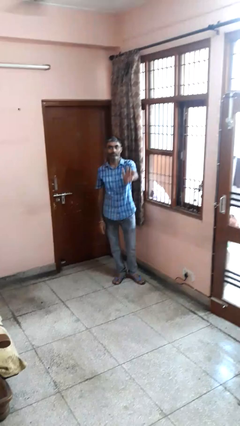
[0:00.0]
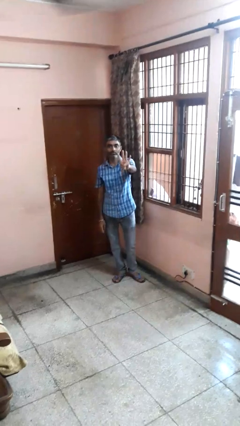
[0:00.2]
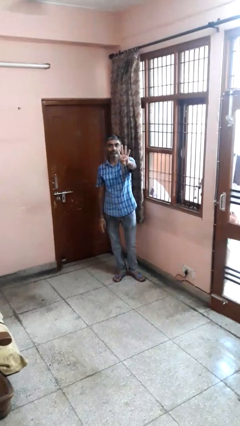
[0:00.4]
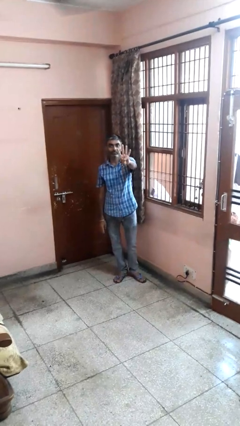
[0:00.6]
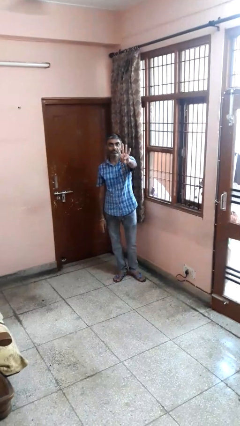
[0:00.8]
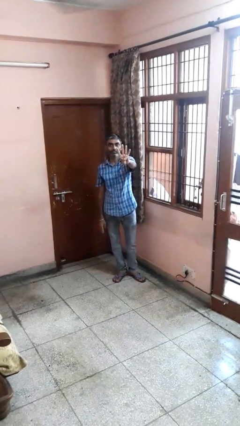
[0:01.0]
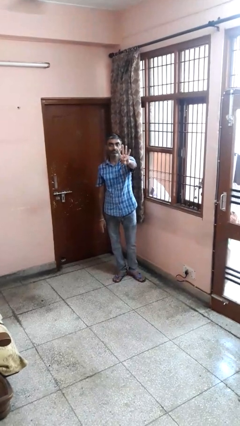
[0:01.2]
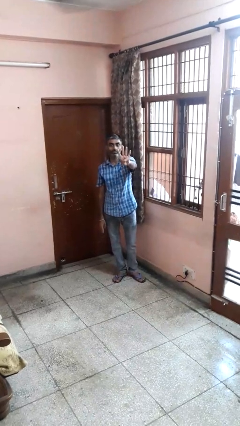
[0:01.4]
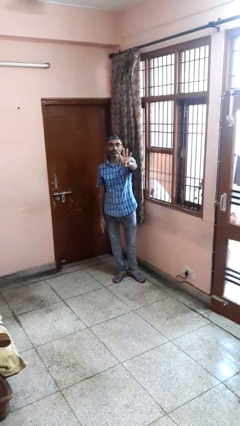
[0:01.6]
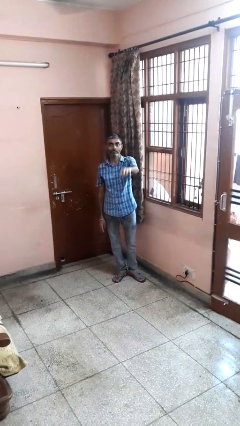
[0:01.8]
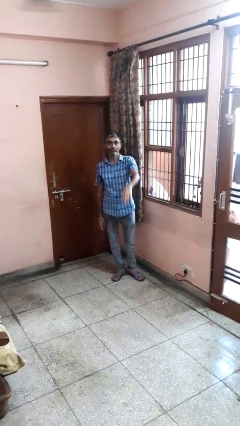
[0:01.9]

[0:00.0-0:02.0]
person gestures number four

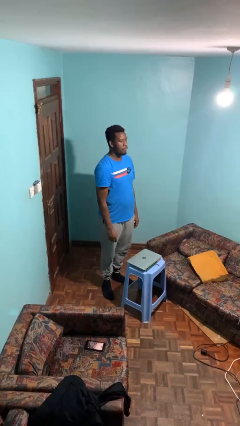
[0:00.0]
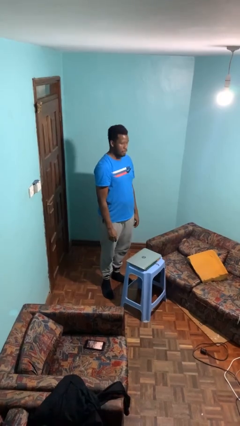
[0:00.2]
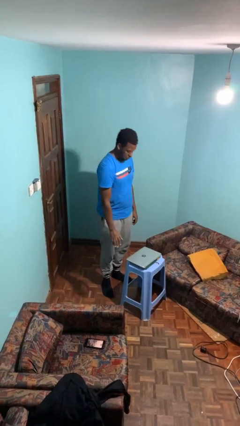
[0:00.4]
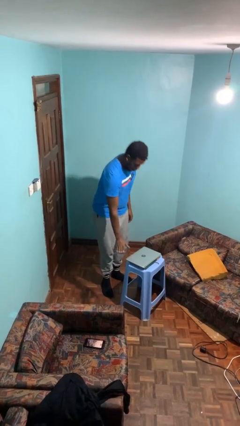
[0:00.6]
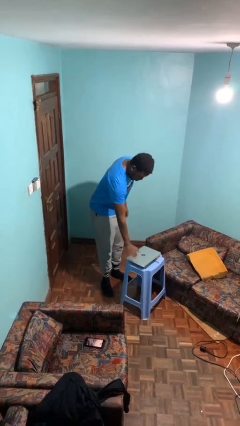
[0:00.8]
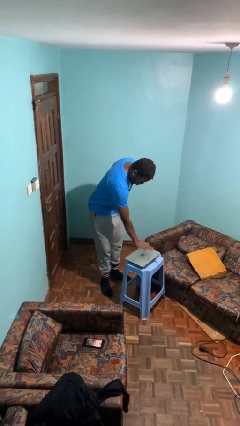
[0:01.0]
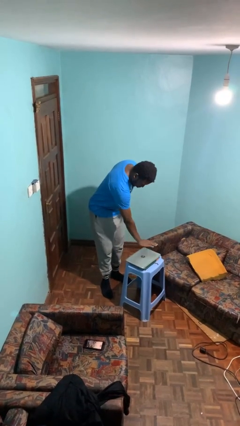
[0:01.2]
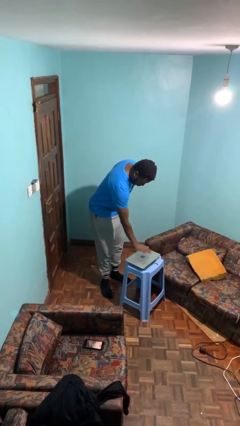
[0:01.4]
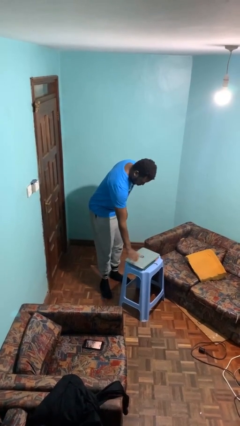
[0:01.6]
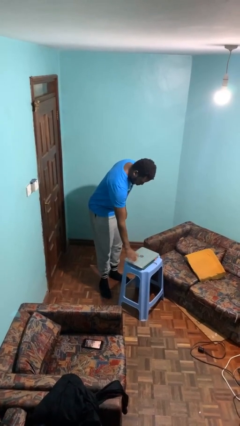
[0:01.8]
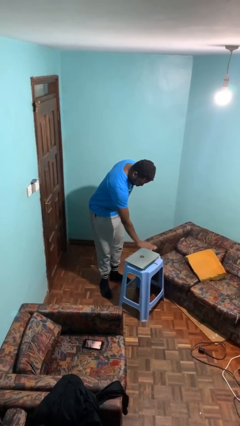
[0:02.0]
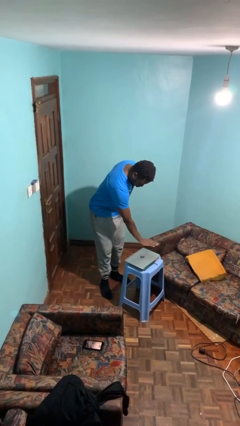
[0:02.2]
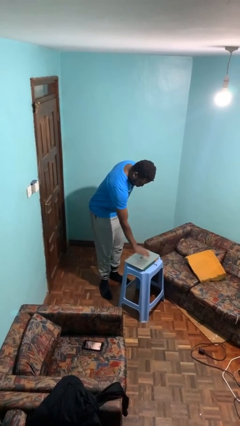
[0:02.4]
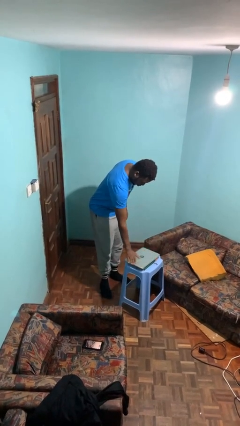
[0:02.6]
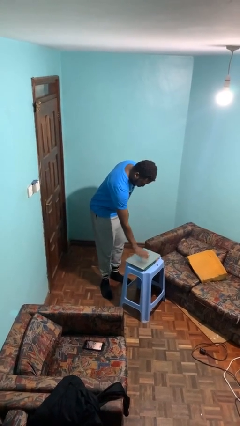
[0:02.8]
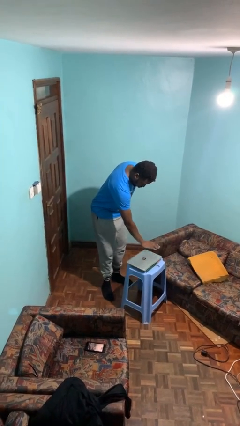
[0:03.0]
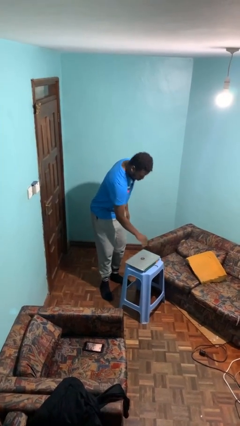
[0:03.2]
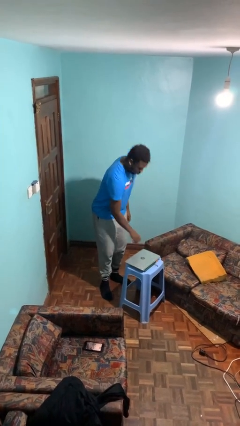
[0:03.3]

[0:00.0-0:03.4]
person waves hand over object

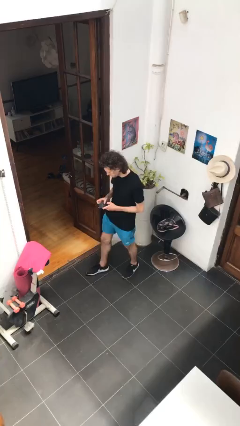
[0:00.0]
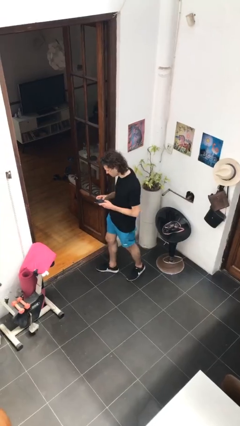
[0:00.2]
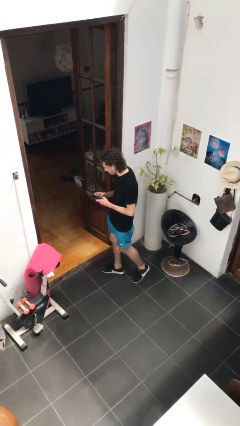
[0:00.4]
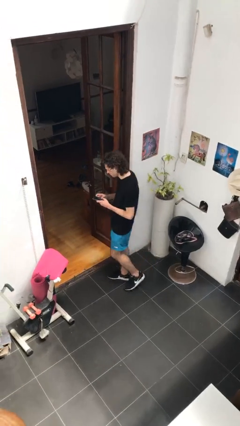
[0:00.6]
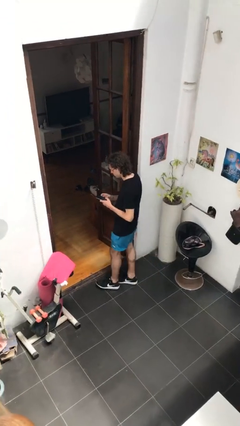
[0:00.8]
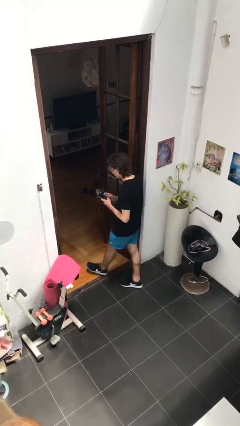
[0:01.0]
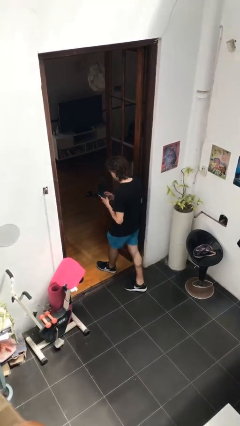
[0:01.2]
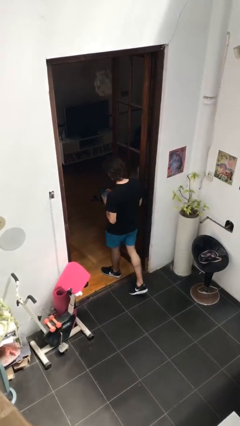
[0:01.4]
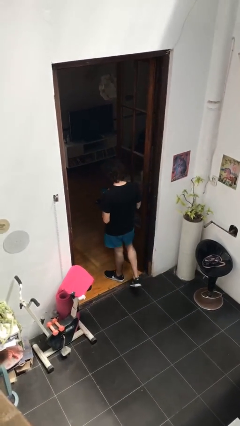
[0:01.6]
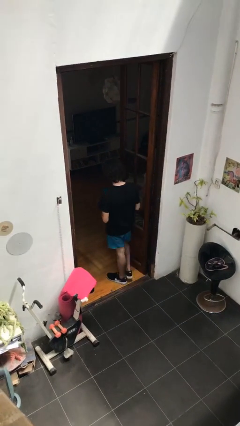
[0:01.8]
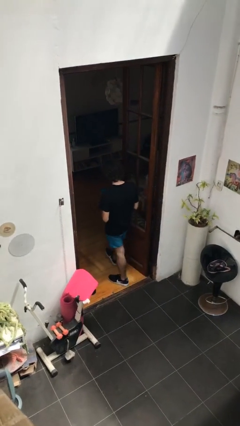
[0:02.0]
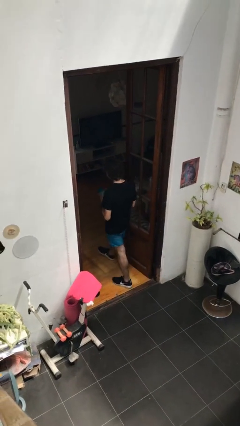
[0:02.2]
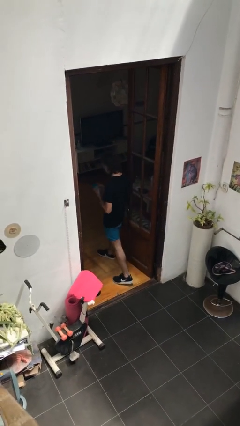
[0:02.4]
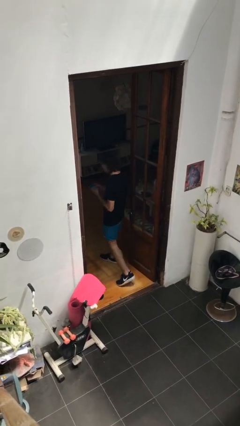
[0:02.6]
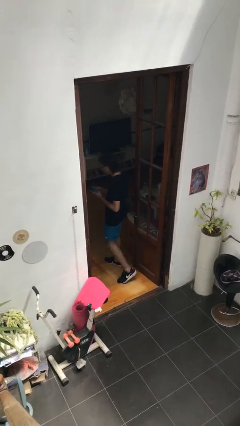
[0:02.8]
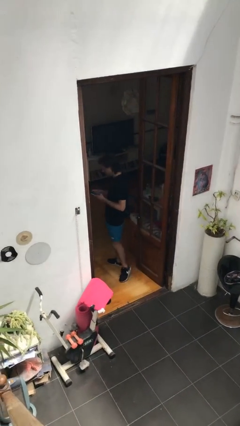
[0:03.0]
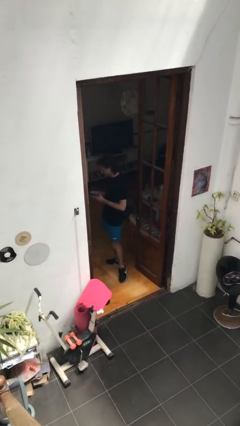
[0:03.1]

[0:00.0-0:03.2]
person exits scene through structure

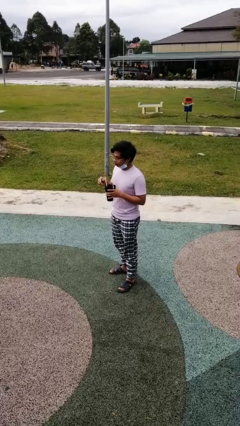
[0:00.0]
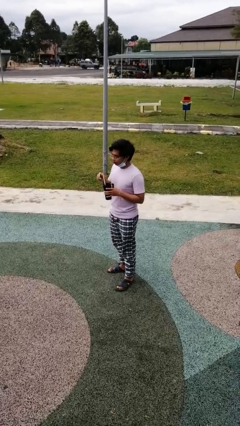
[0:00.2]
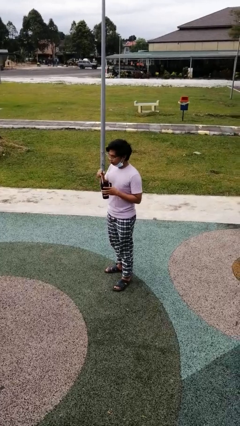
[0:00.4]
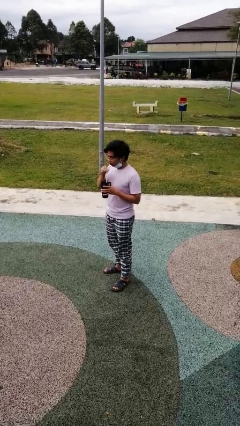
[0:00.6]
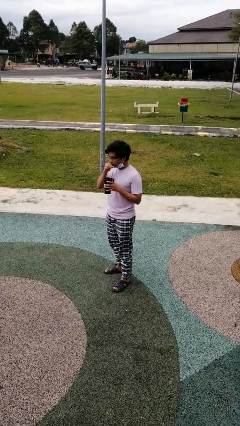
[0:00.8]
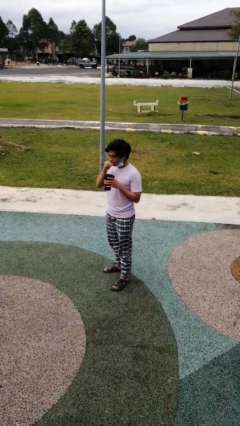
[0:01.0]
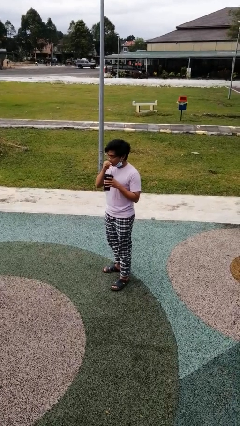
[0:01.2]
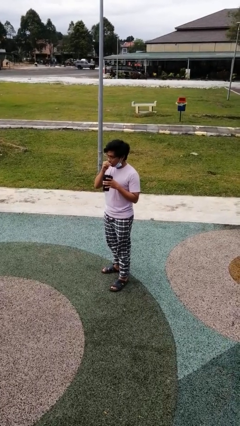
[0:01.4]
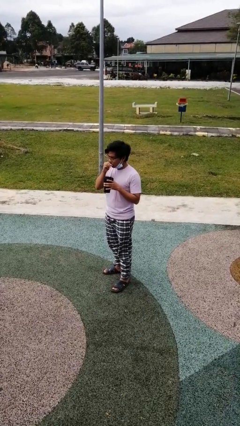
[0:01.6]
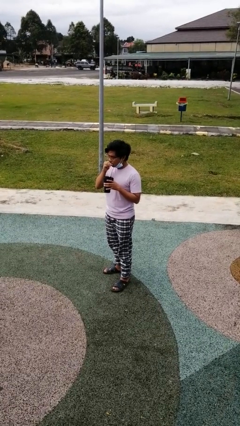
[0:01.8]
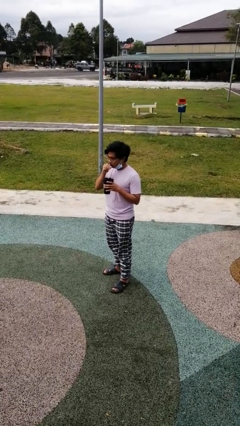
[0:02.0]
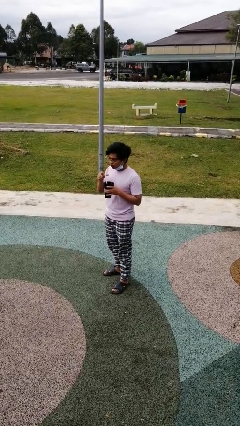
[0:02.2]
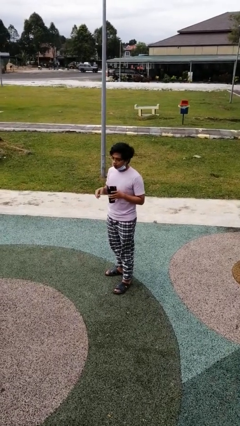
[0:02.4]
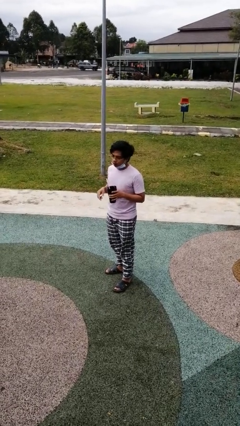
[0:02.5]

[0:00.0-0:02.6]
person drinks from straw

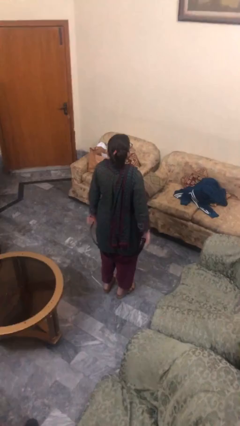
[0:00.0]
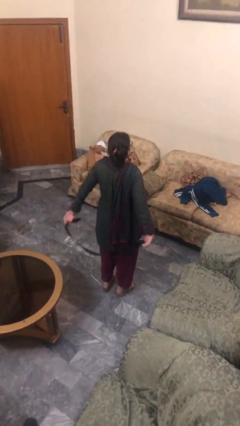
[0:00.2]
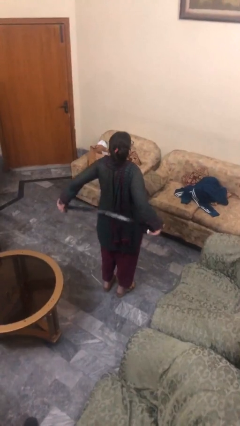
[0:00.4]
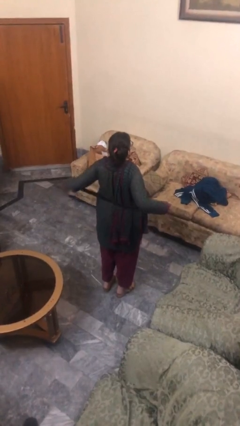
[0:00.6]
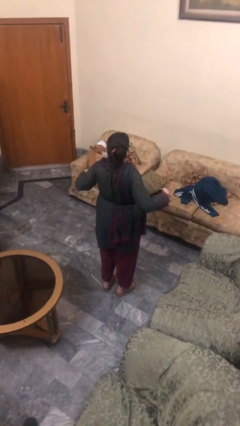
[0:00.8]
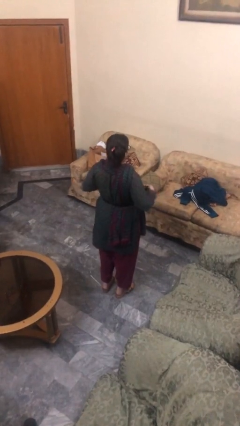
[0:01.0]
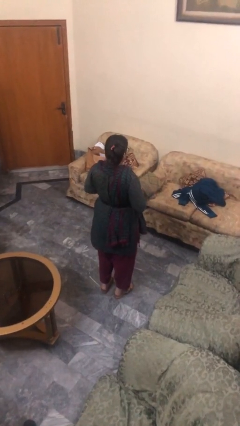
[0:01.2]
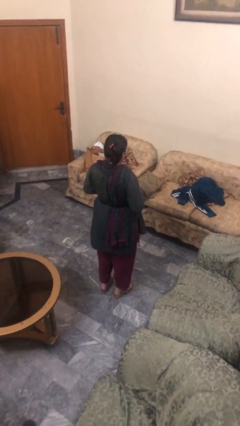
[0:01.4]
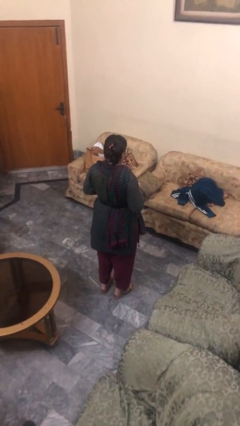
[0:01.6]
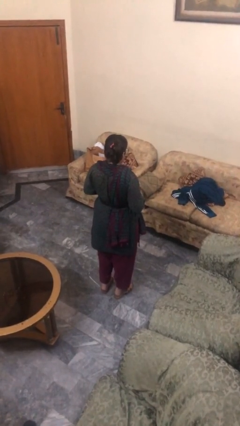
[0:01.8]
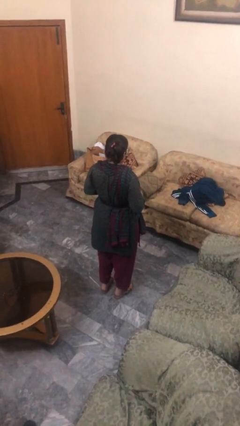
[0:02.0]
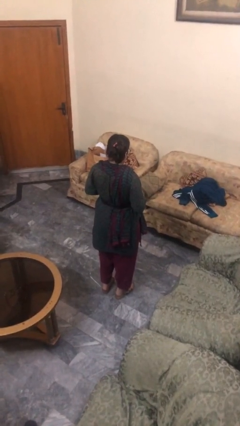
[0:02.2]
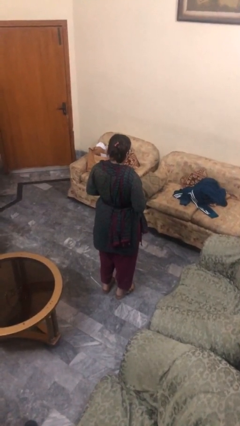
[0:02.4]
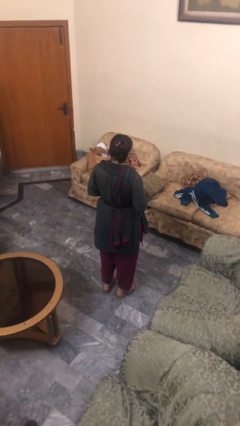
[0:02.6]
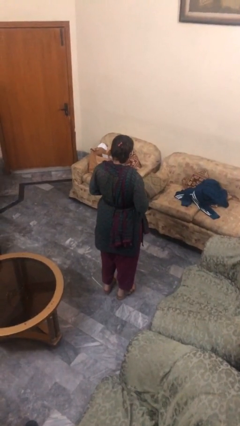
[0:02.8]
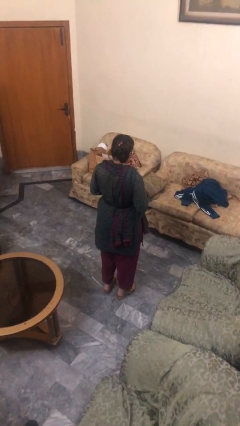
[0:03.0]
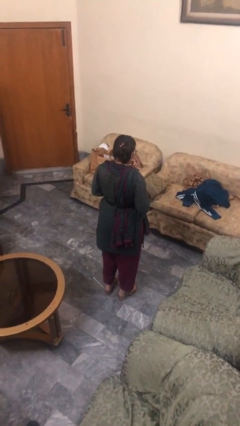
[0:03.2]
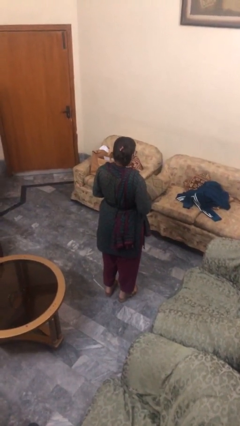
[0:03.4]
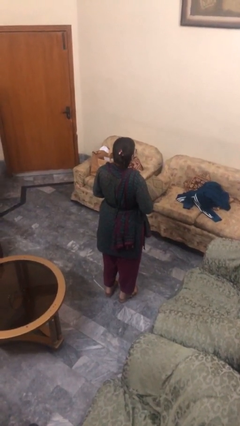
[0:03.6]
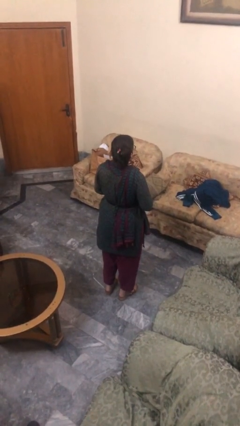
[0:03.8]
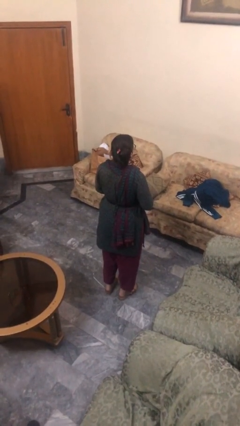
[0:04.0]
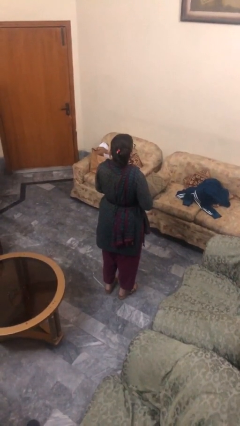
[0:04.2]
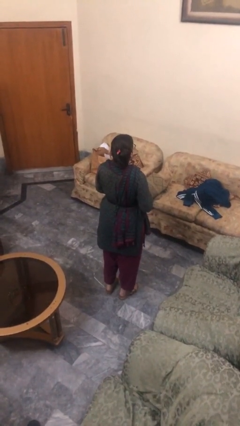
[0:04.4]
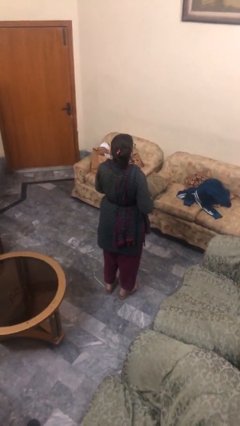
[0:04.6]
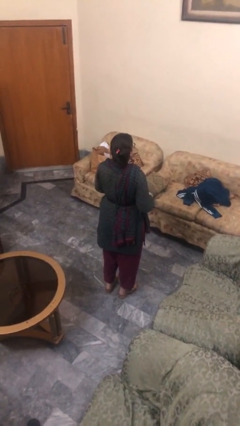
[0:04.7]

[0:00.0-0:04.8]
person puts on belt

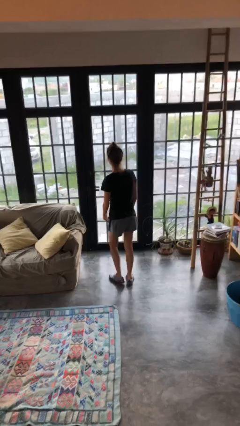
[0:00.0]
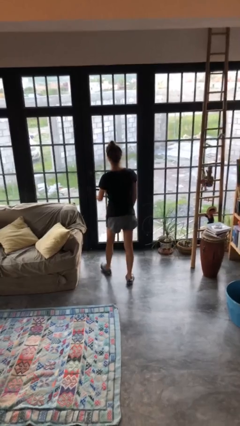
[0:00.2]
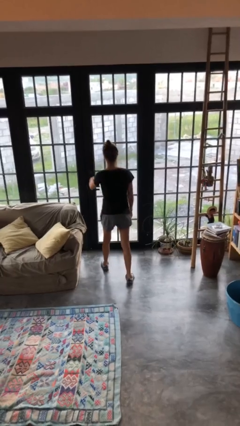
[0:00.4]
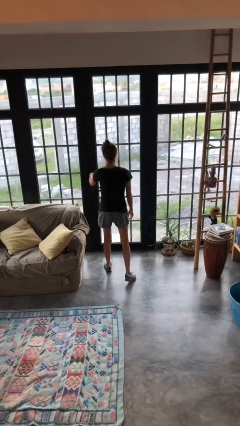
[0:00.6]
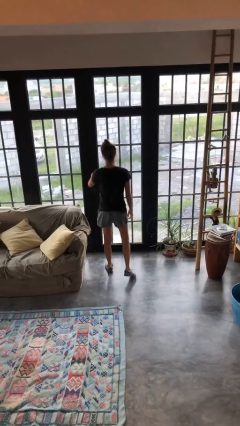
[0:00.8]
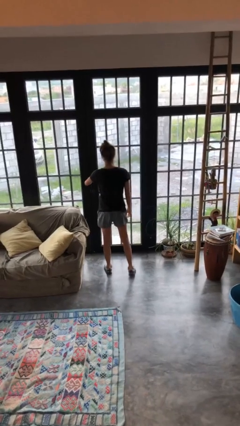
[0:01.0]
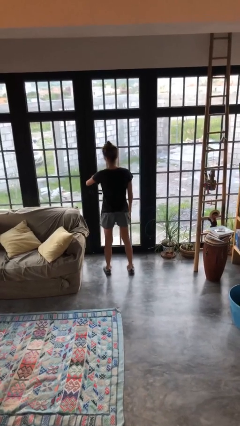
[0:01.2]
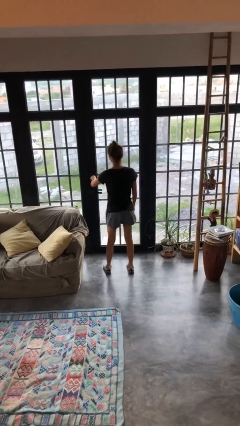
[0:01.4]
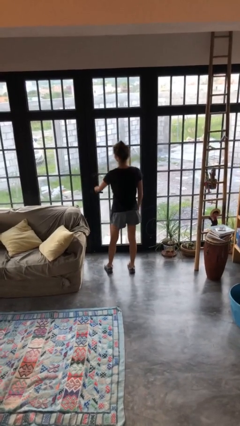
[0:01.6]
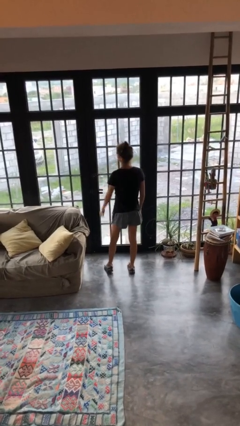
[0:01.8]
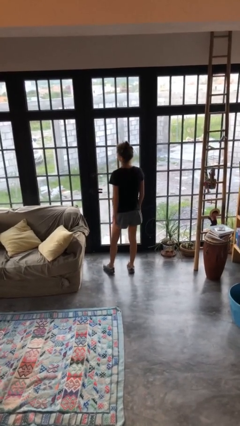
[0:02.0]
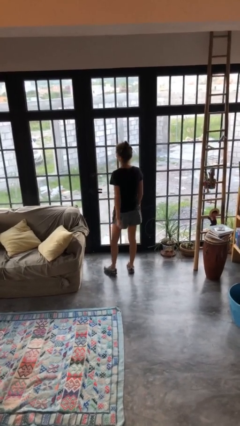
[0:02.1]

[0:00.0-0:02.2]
person unlocks door with keys
